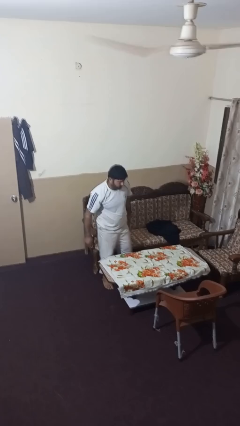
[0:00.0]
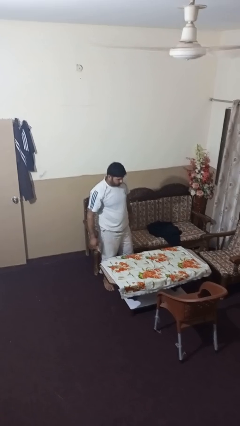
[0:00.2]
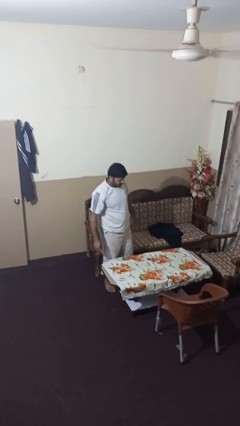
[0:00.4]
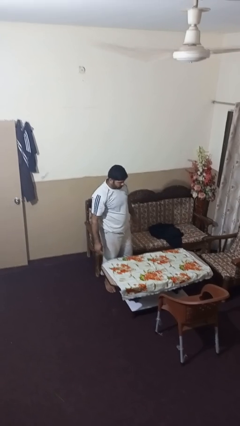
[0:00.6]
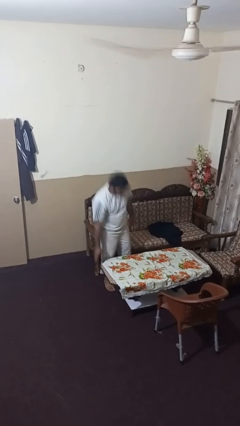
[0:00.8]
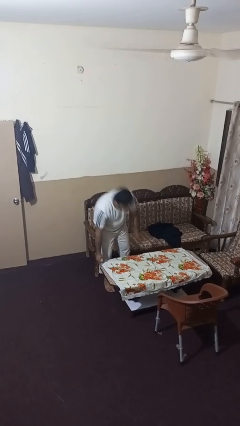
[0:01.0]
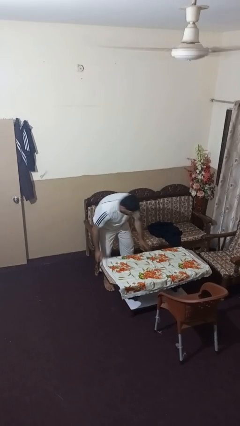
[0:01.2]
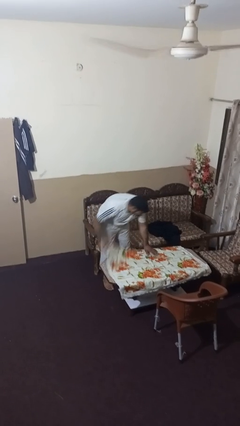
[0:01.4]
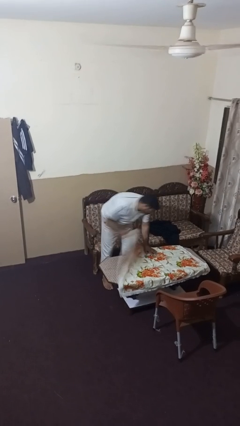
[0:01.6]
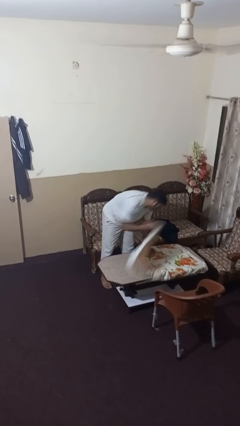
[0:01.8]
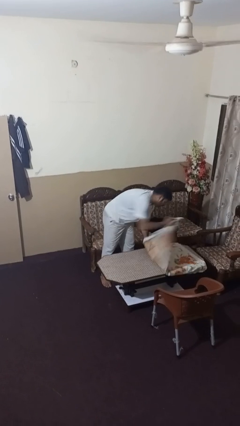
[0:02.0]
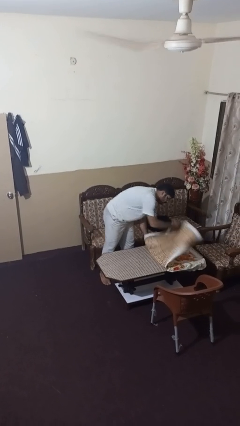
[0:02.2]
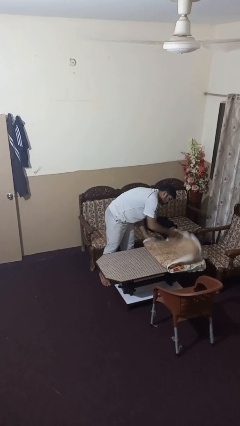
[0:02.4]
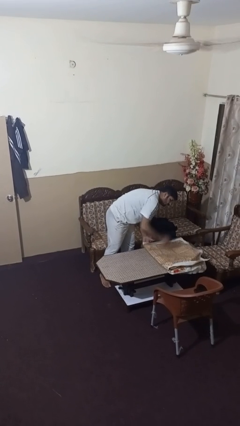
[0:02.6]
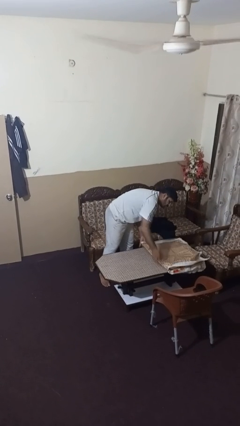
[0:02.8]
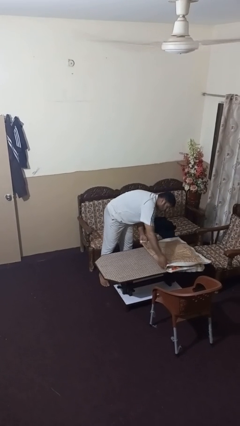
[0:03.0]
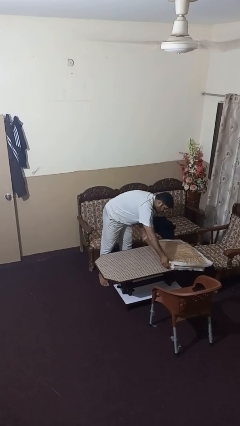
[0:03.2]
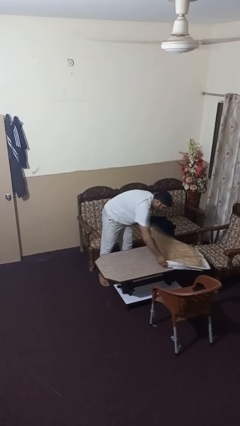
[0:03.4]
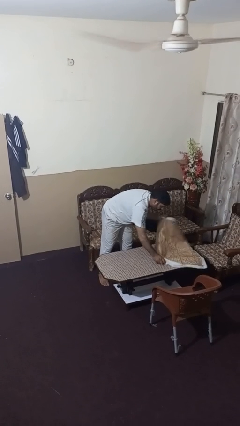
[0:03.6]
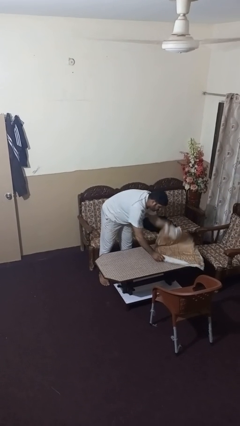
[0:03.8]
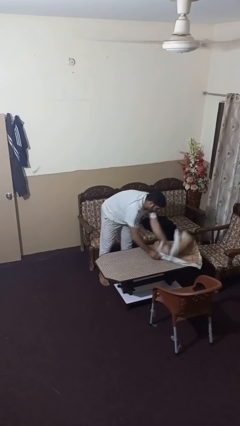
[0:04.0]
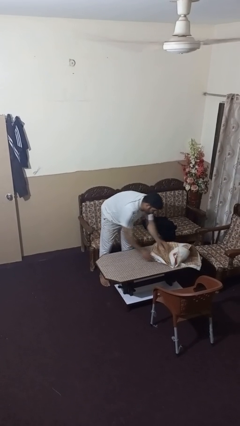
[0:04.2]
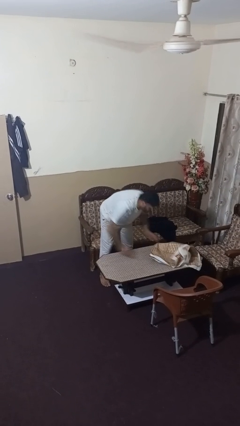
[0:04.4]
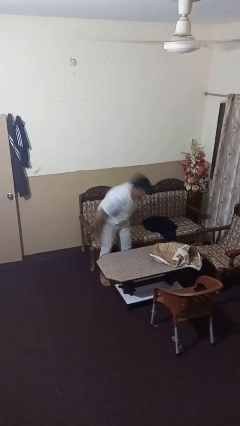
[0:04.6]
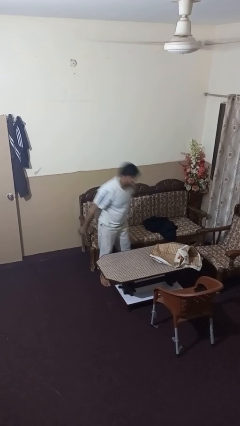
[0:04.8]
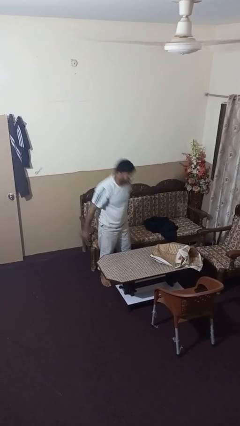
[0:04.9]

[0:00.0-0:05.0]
person folds tablecloth

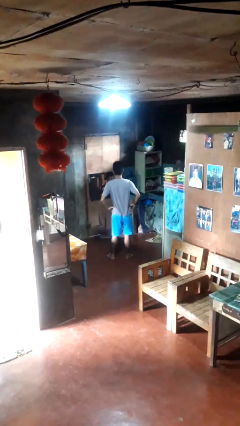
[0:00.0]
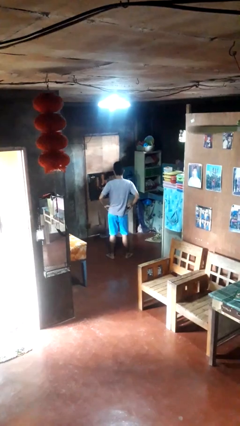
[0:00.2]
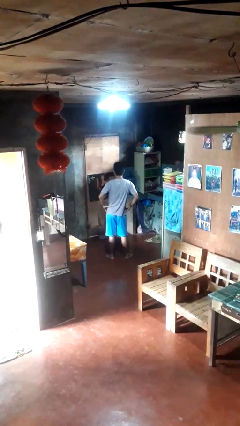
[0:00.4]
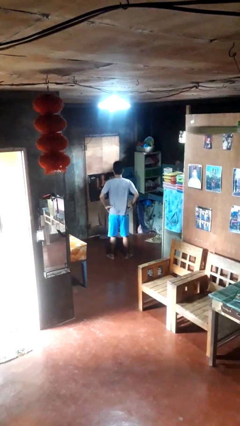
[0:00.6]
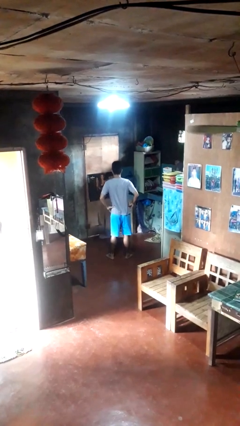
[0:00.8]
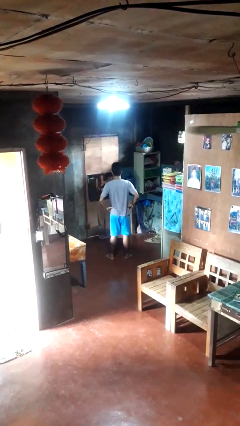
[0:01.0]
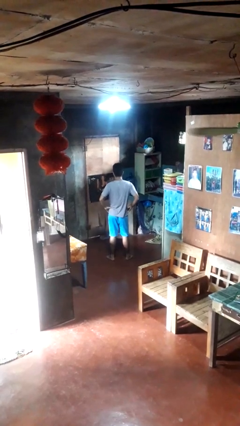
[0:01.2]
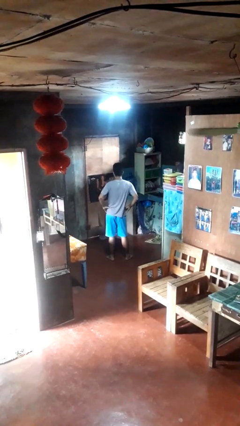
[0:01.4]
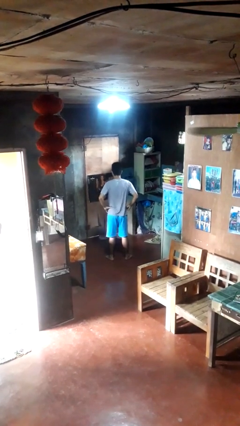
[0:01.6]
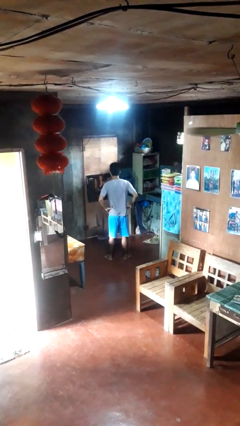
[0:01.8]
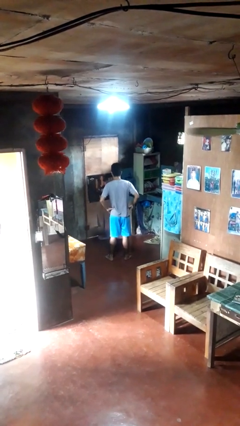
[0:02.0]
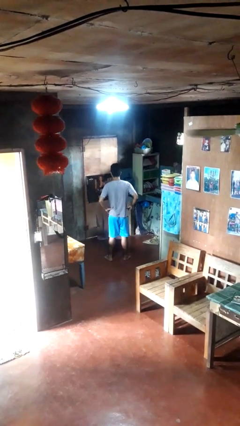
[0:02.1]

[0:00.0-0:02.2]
person wiggles hips

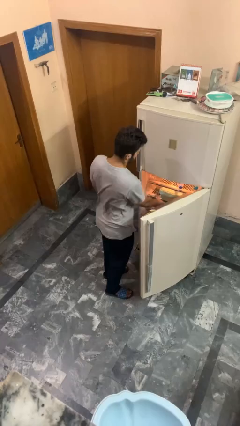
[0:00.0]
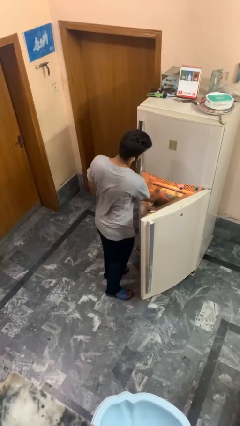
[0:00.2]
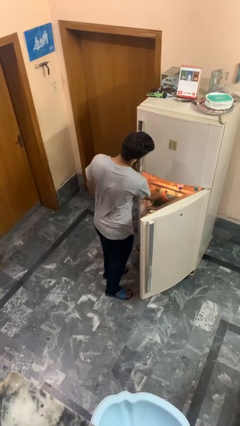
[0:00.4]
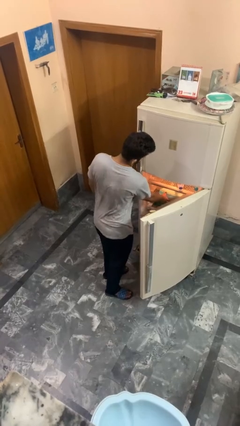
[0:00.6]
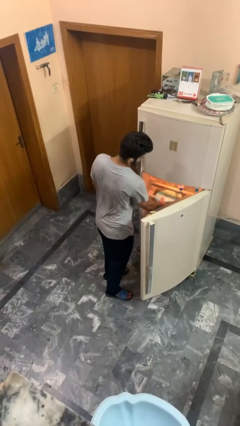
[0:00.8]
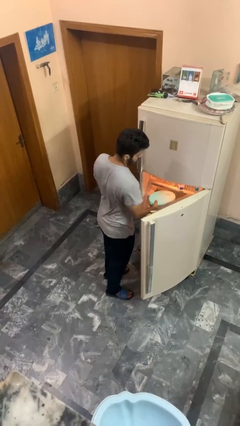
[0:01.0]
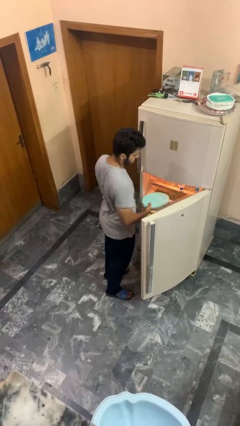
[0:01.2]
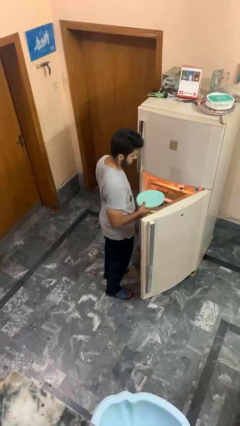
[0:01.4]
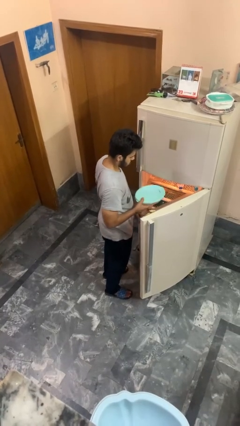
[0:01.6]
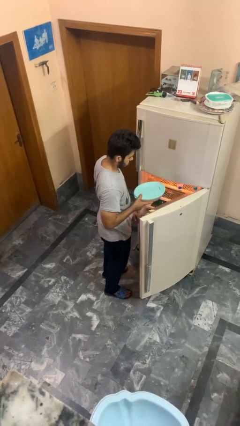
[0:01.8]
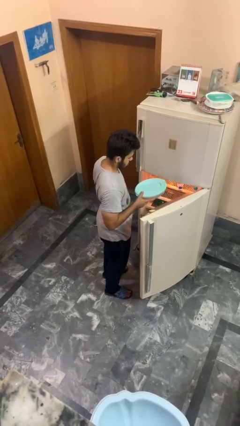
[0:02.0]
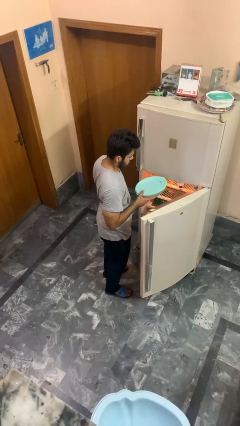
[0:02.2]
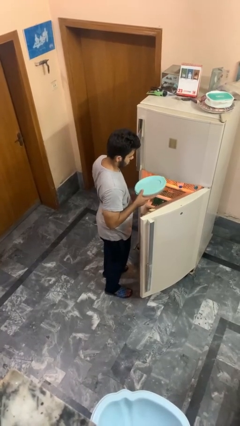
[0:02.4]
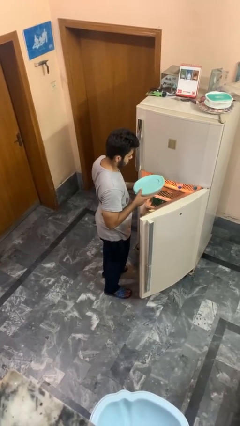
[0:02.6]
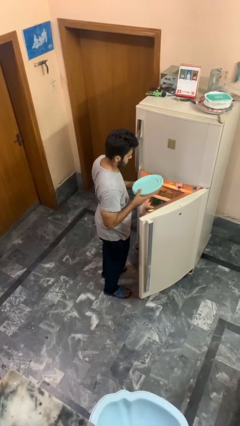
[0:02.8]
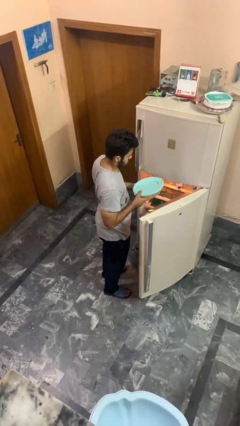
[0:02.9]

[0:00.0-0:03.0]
person picks up object from cabinet

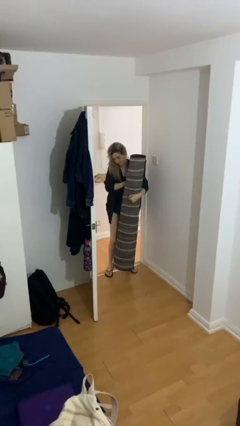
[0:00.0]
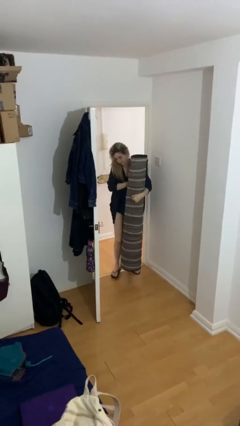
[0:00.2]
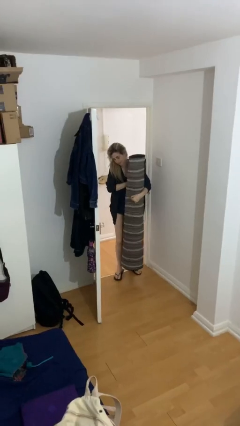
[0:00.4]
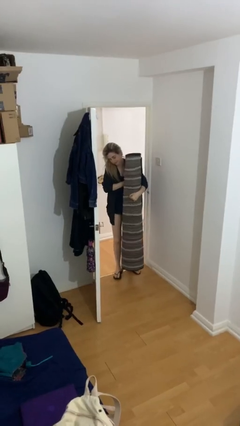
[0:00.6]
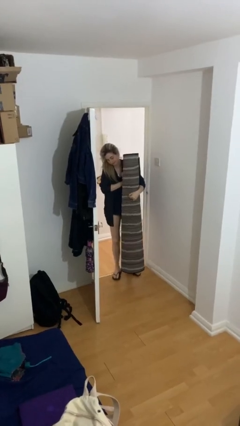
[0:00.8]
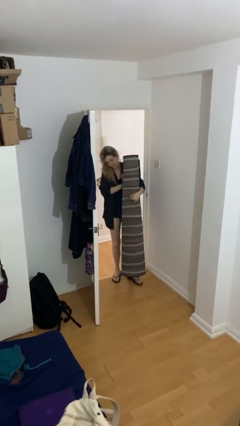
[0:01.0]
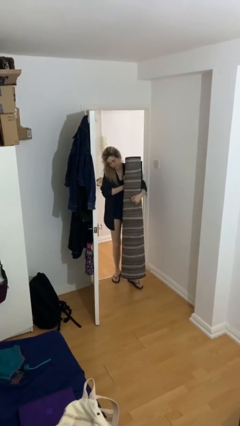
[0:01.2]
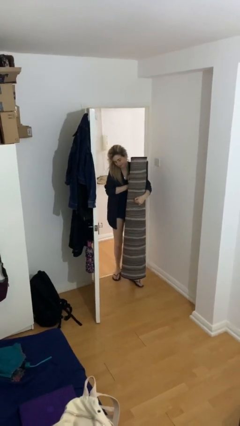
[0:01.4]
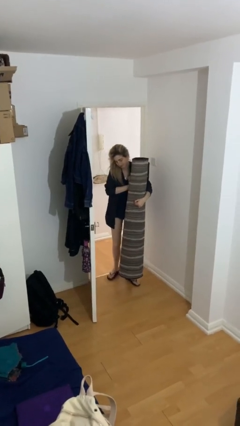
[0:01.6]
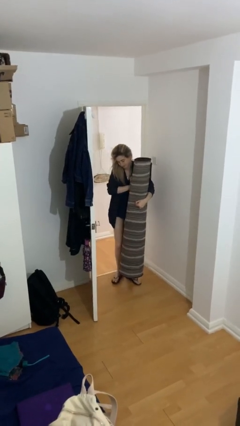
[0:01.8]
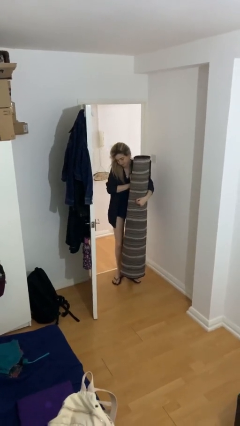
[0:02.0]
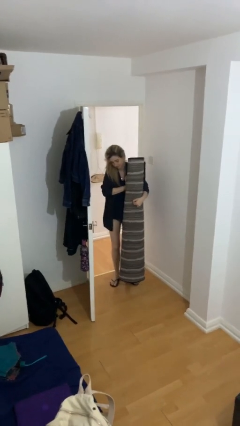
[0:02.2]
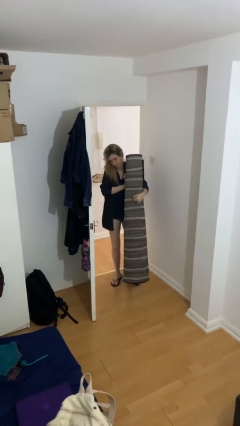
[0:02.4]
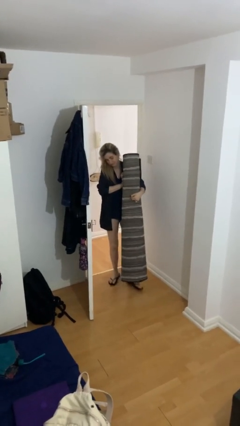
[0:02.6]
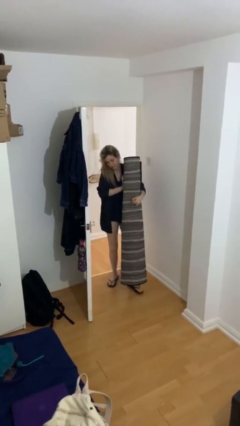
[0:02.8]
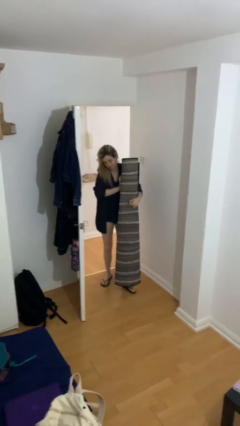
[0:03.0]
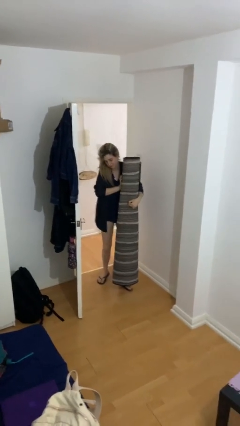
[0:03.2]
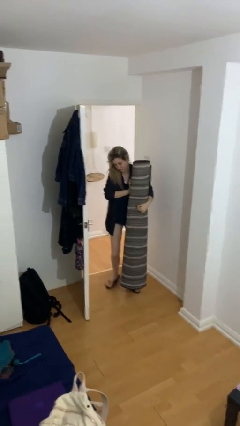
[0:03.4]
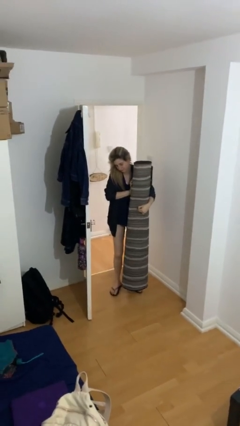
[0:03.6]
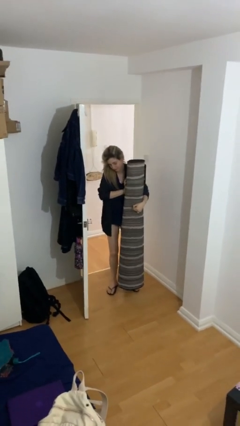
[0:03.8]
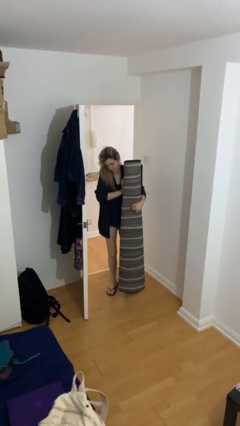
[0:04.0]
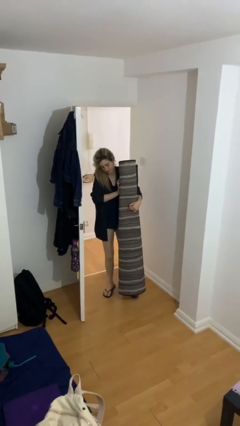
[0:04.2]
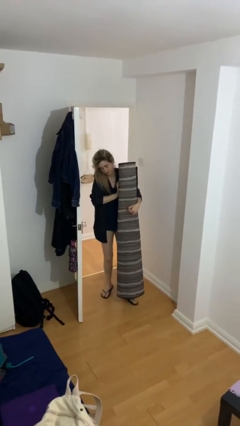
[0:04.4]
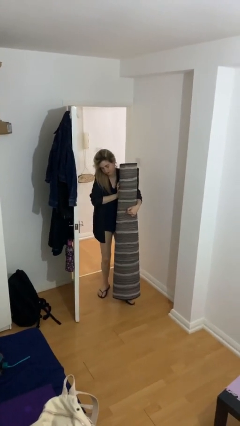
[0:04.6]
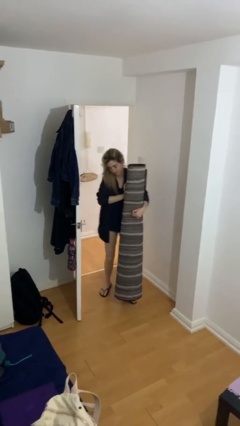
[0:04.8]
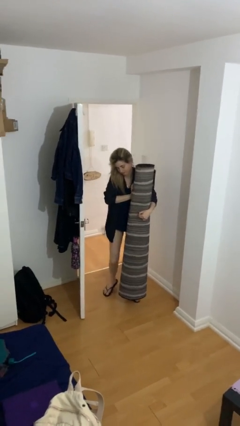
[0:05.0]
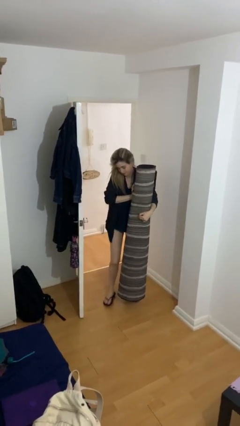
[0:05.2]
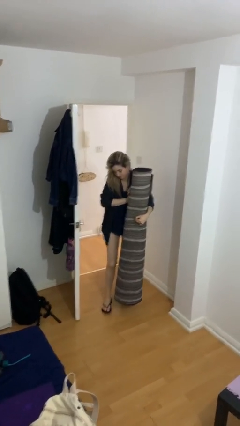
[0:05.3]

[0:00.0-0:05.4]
person carries heavy object

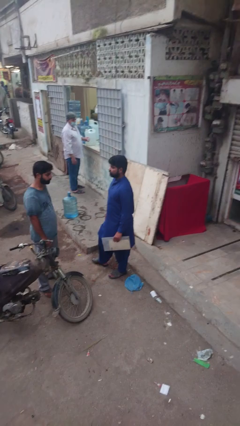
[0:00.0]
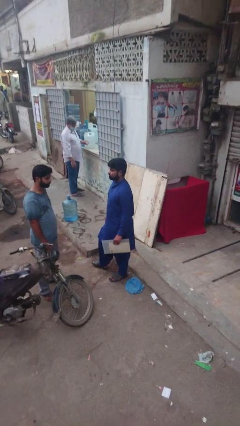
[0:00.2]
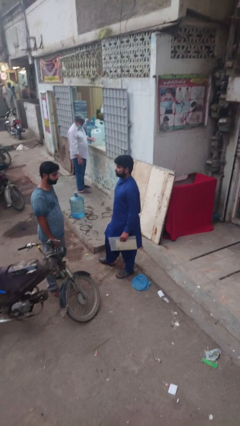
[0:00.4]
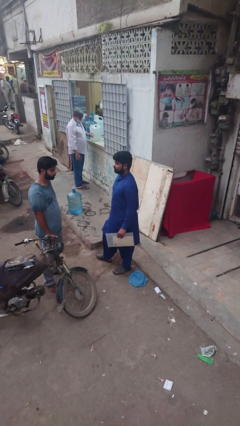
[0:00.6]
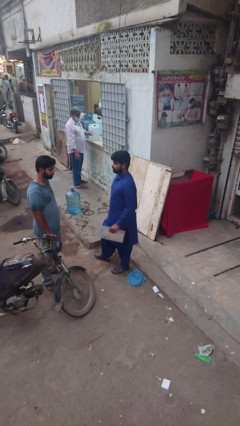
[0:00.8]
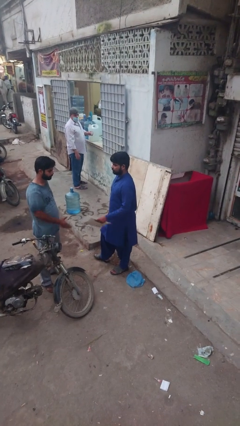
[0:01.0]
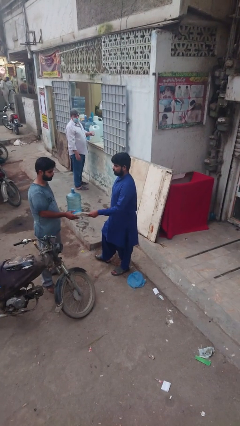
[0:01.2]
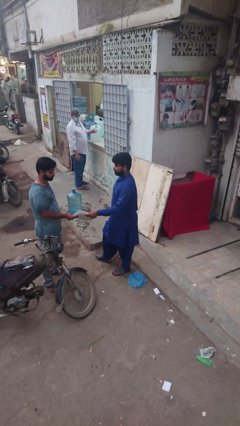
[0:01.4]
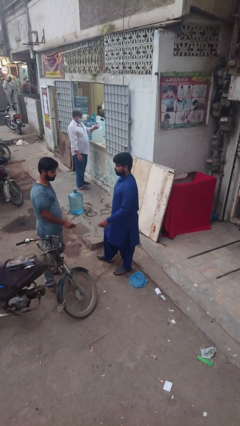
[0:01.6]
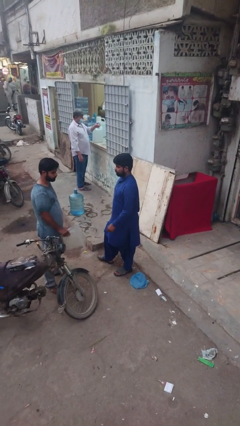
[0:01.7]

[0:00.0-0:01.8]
person transfers object to person
